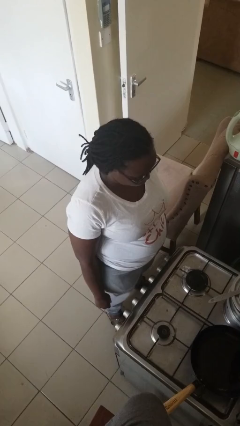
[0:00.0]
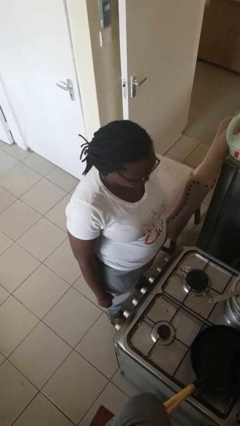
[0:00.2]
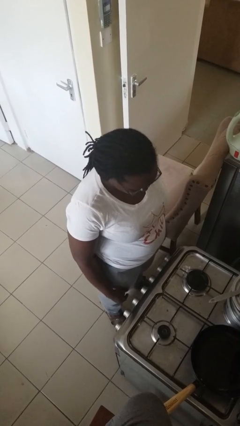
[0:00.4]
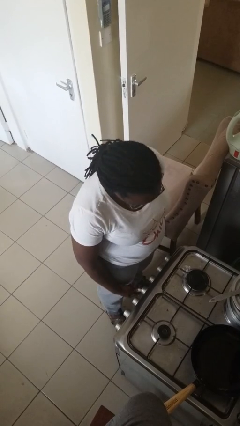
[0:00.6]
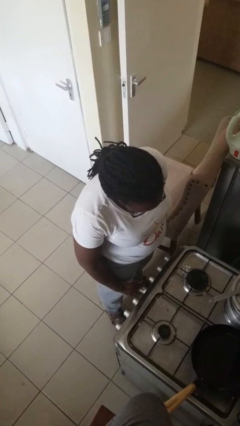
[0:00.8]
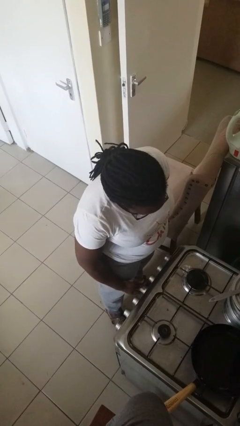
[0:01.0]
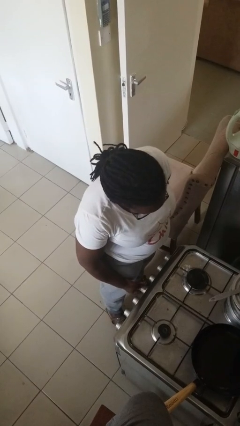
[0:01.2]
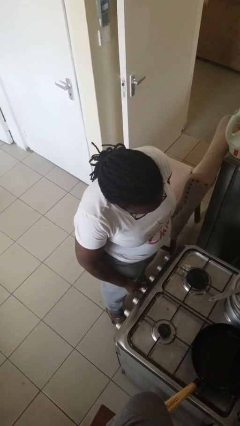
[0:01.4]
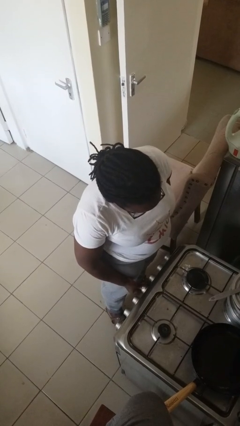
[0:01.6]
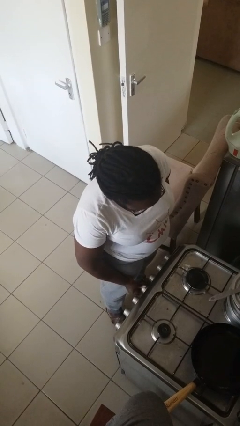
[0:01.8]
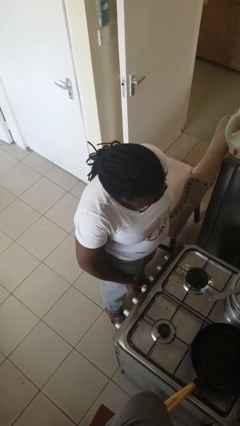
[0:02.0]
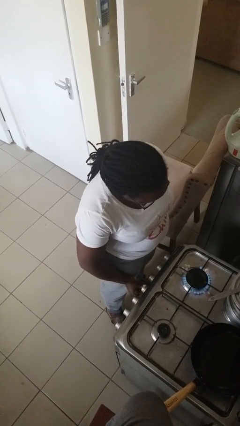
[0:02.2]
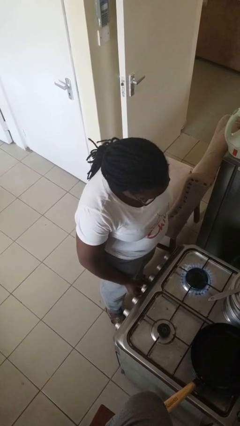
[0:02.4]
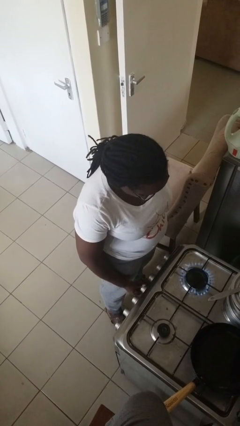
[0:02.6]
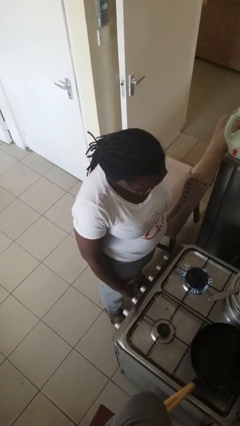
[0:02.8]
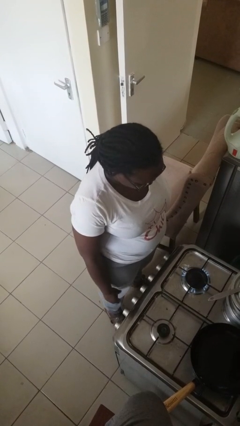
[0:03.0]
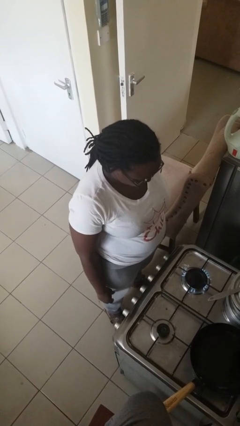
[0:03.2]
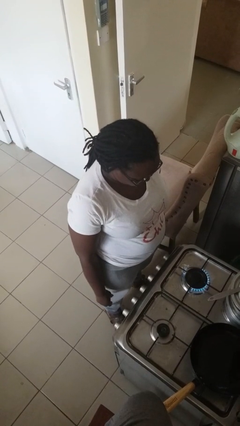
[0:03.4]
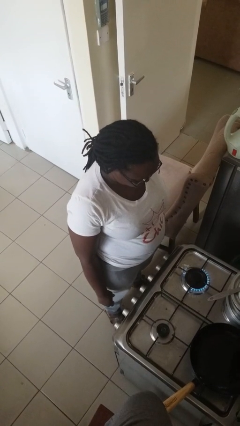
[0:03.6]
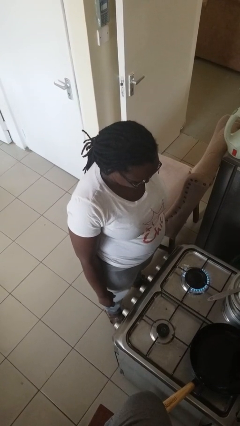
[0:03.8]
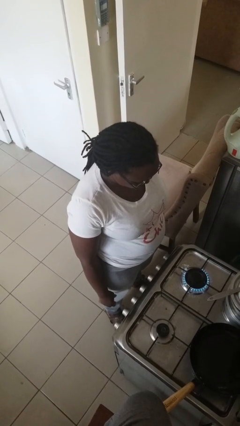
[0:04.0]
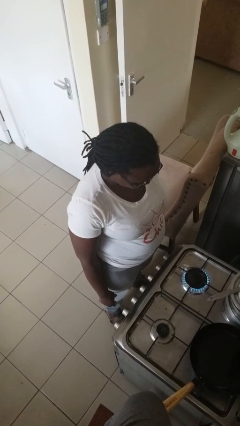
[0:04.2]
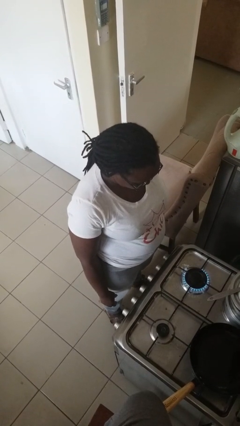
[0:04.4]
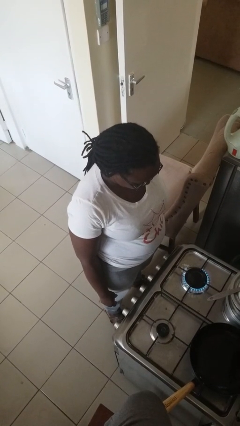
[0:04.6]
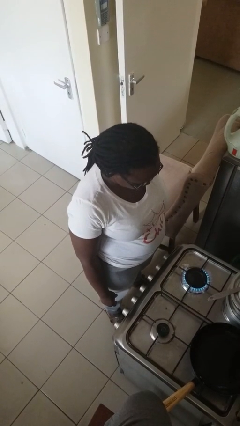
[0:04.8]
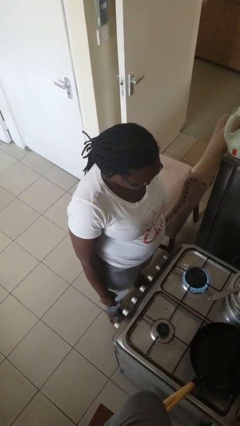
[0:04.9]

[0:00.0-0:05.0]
person turns on stovetop

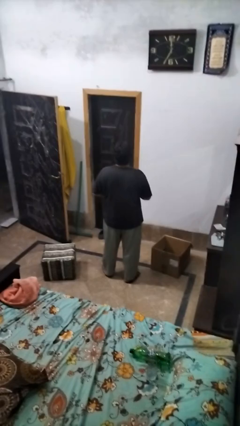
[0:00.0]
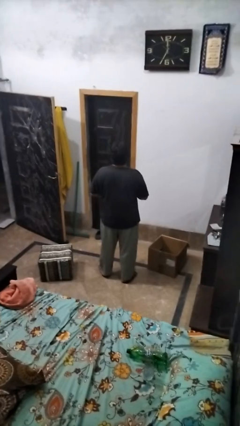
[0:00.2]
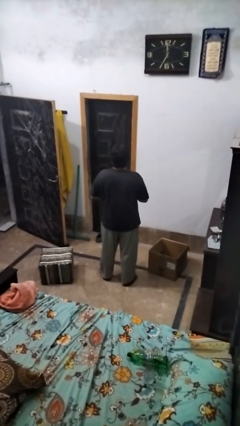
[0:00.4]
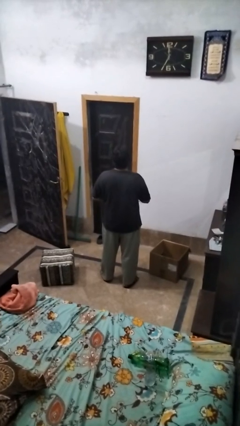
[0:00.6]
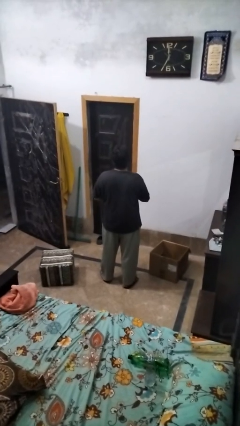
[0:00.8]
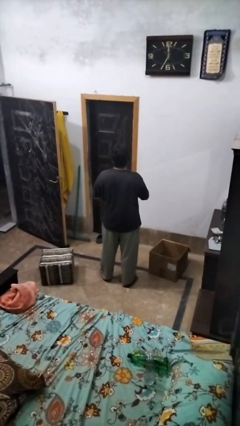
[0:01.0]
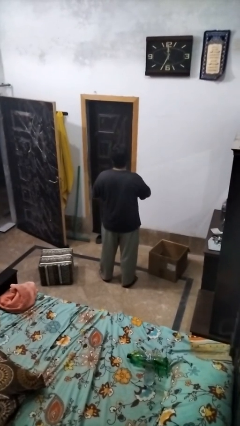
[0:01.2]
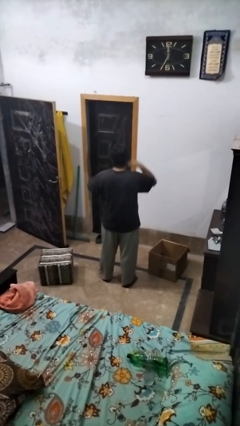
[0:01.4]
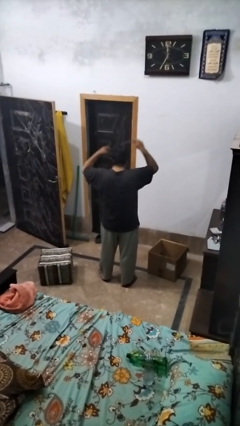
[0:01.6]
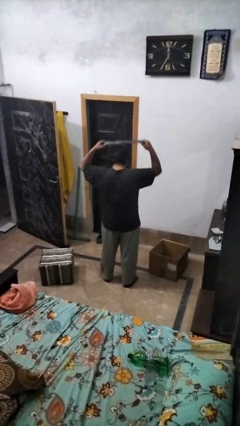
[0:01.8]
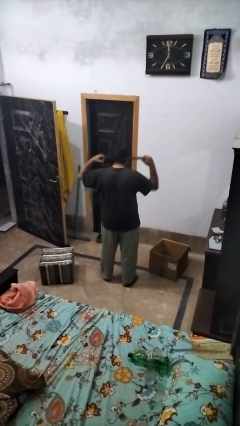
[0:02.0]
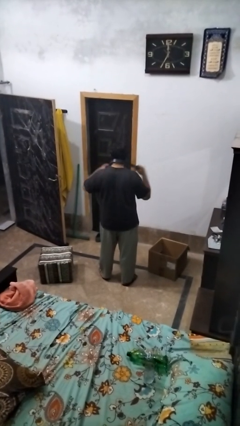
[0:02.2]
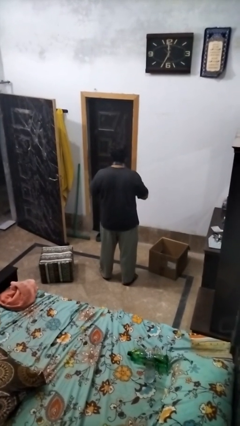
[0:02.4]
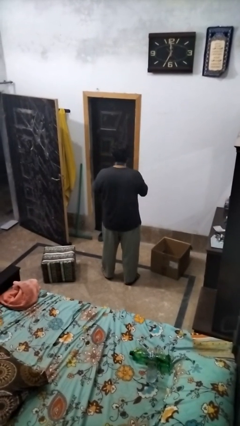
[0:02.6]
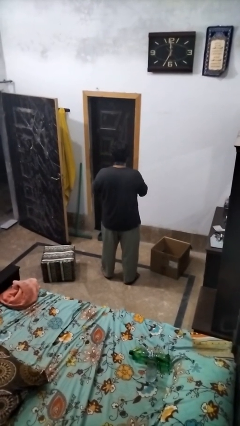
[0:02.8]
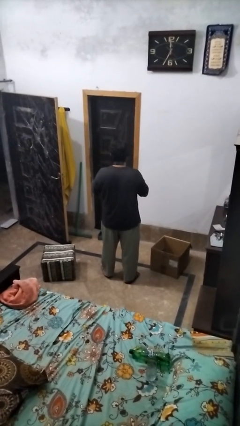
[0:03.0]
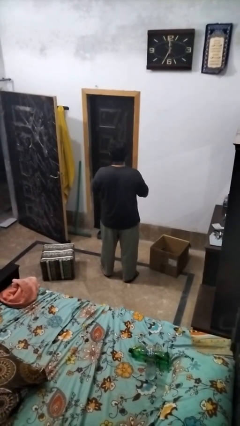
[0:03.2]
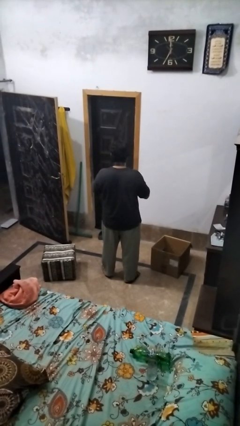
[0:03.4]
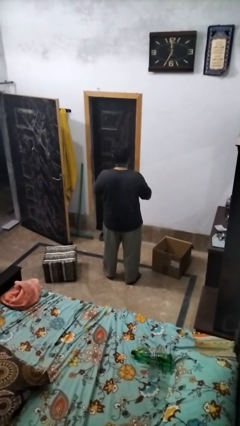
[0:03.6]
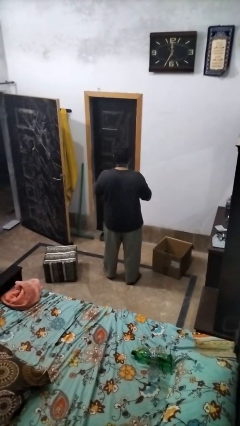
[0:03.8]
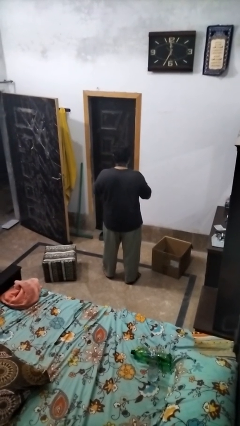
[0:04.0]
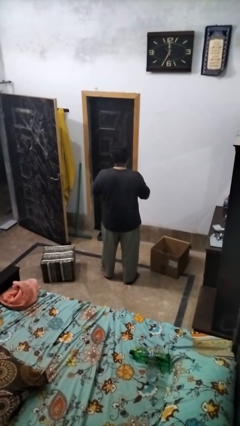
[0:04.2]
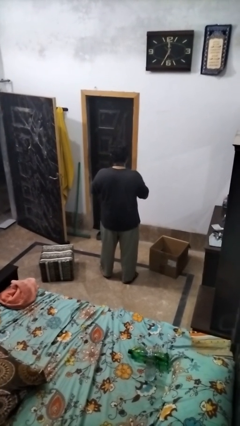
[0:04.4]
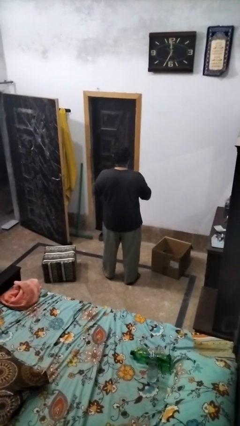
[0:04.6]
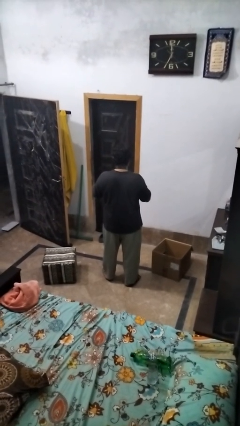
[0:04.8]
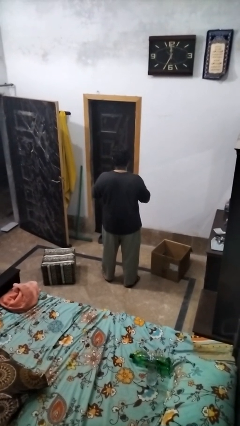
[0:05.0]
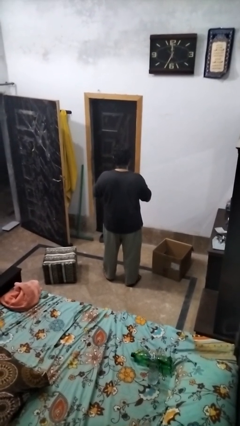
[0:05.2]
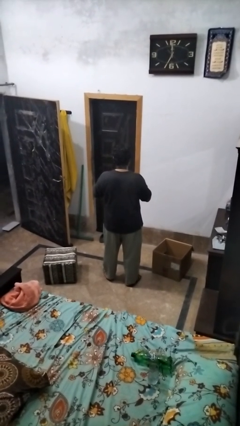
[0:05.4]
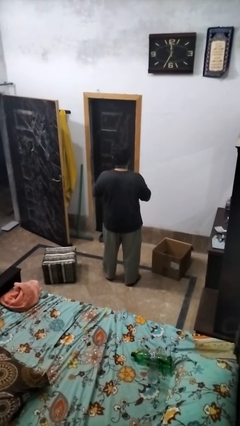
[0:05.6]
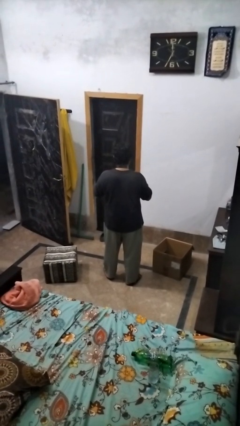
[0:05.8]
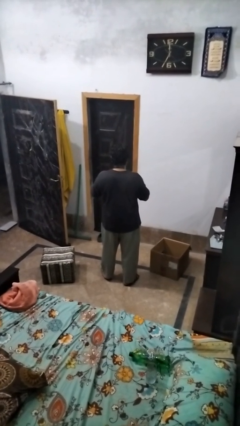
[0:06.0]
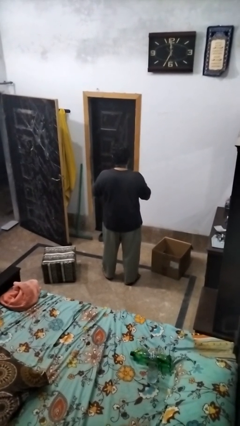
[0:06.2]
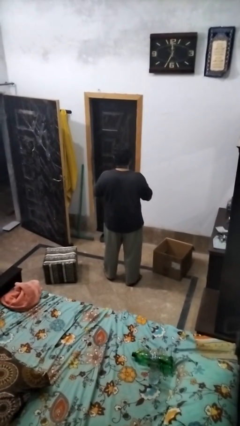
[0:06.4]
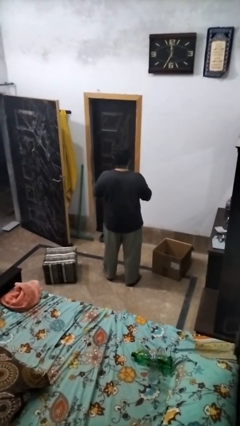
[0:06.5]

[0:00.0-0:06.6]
person puts on necktie

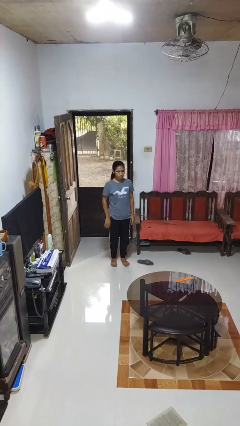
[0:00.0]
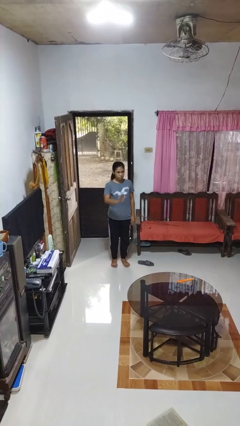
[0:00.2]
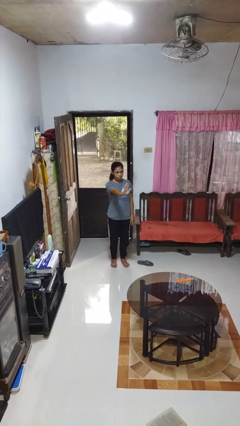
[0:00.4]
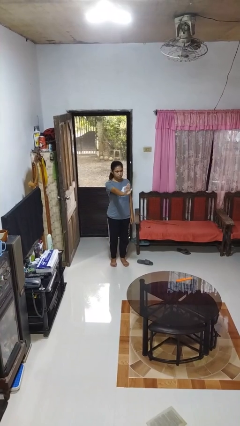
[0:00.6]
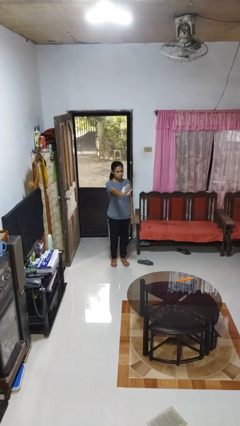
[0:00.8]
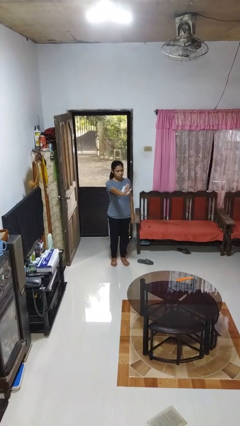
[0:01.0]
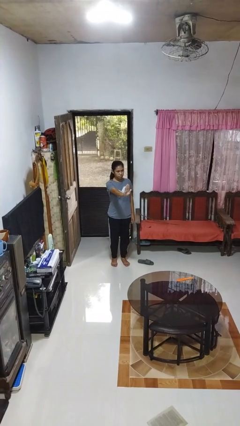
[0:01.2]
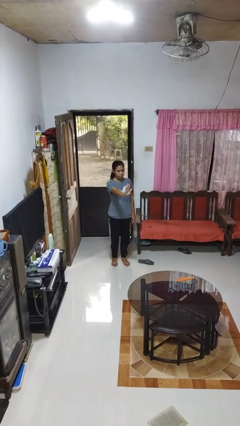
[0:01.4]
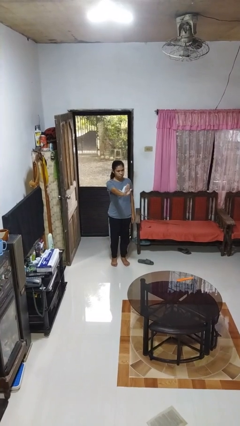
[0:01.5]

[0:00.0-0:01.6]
person gestures stop

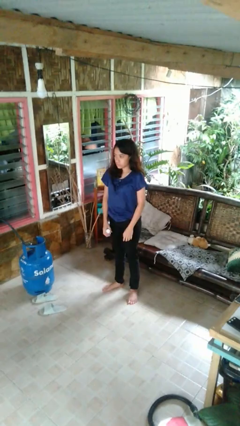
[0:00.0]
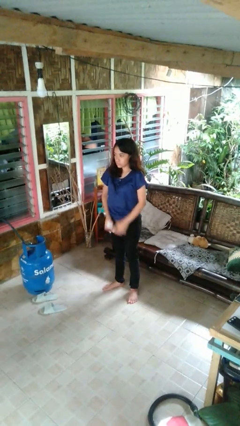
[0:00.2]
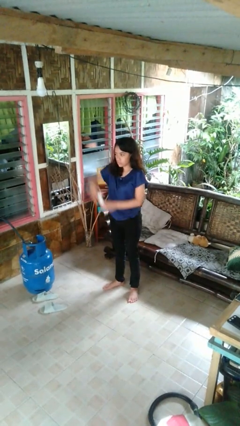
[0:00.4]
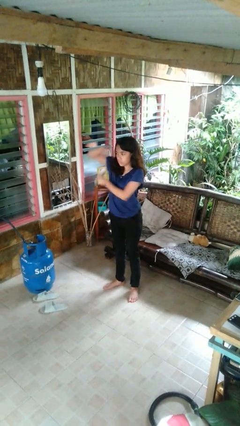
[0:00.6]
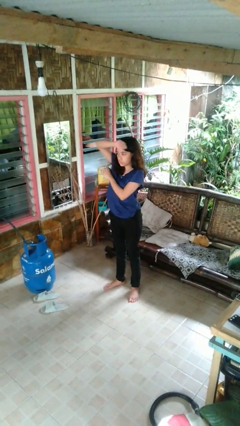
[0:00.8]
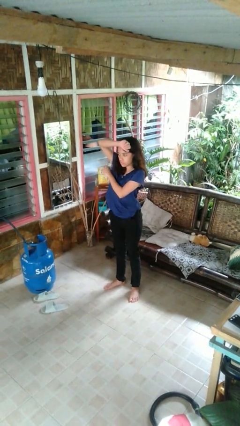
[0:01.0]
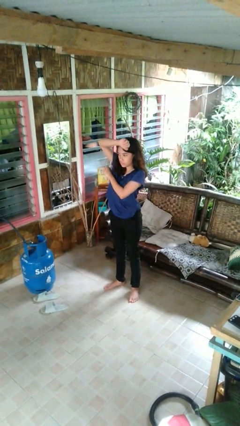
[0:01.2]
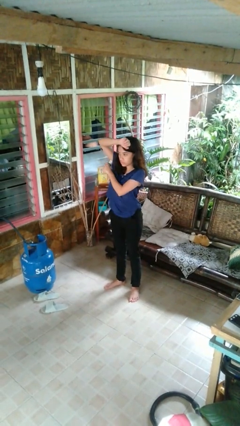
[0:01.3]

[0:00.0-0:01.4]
person applies deodorant

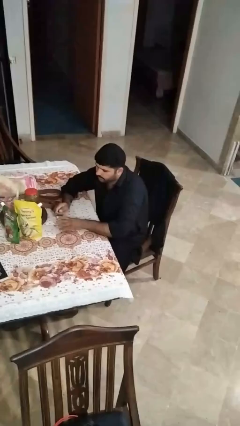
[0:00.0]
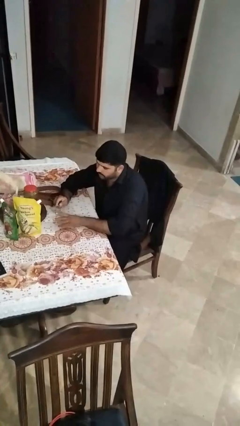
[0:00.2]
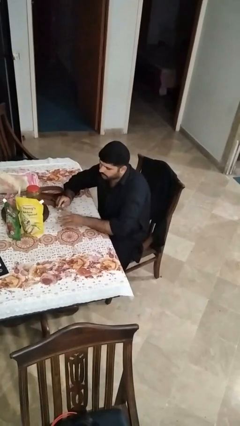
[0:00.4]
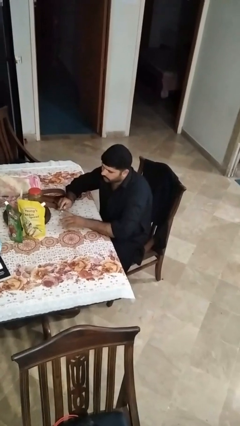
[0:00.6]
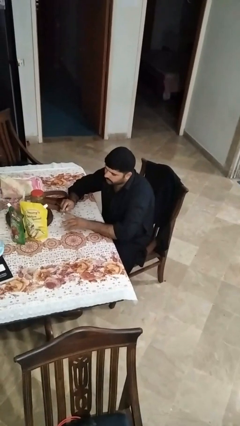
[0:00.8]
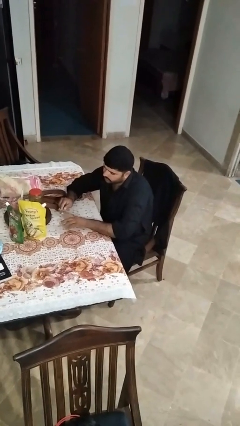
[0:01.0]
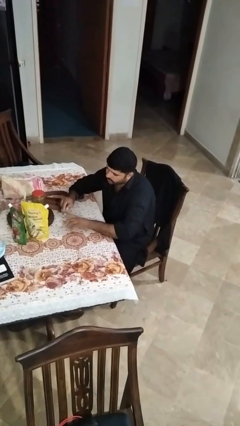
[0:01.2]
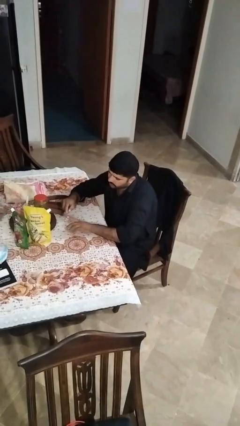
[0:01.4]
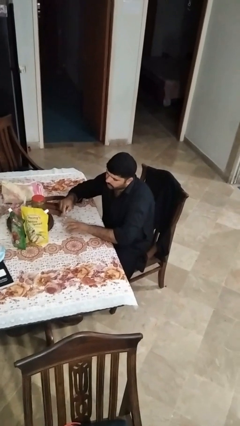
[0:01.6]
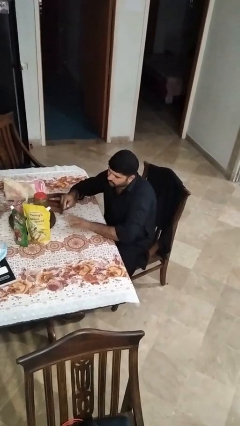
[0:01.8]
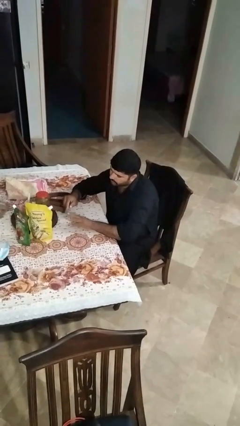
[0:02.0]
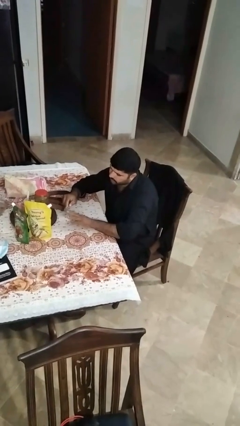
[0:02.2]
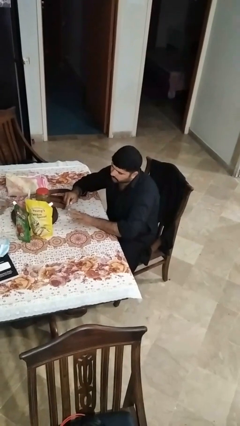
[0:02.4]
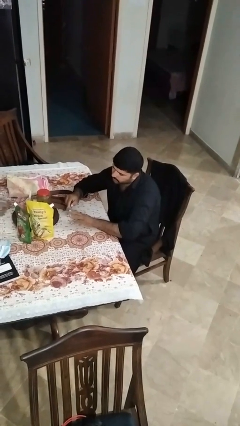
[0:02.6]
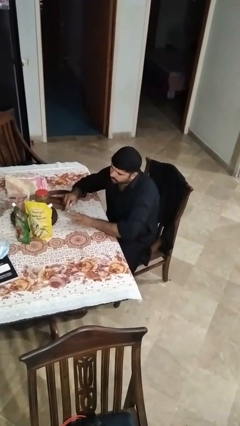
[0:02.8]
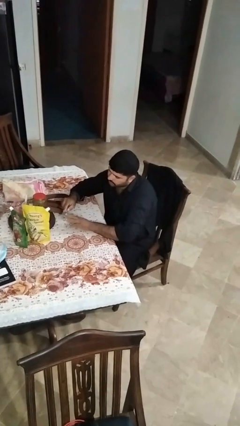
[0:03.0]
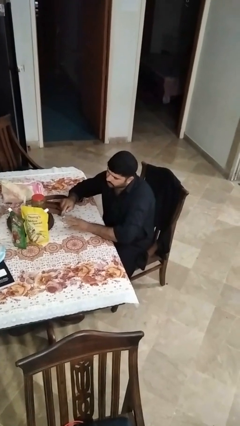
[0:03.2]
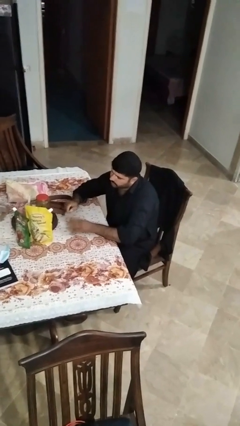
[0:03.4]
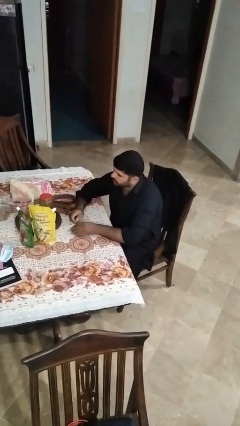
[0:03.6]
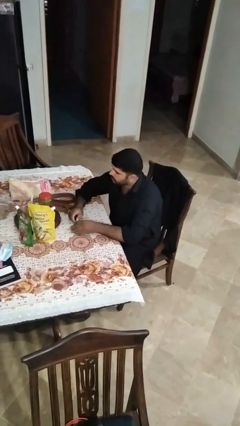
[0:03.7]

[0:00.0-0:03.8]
person files fingernails
